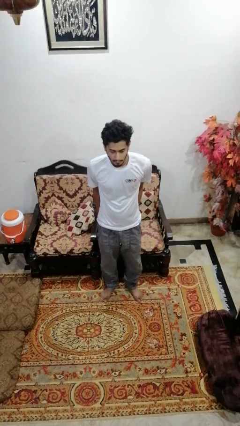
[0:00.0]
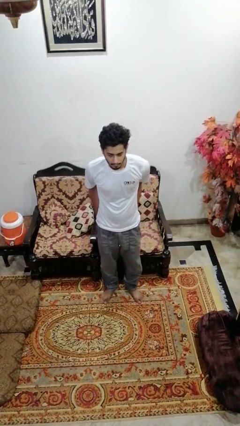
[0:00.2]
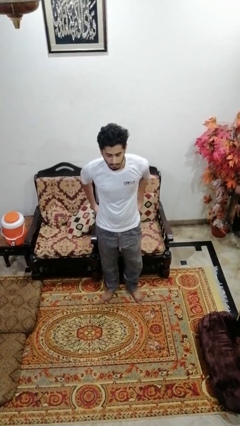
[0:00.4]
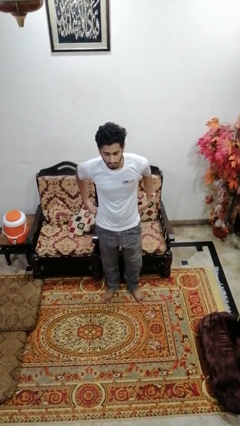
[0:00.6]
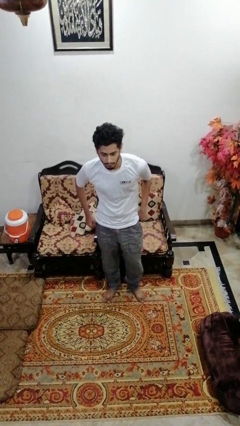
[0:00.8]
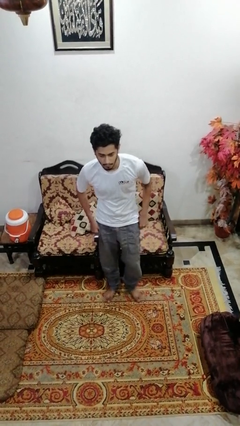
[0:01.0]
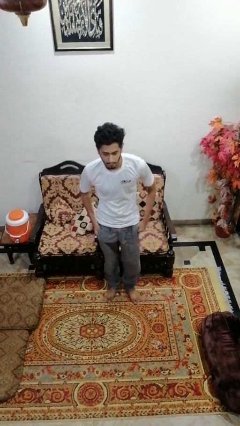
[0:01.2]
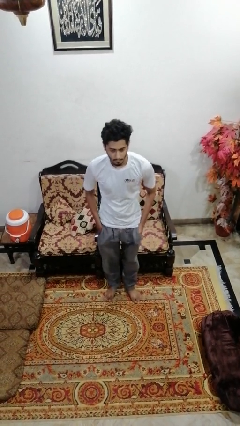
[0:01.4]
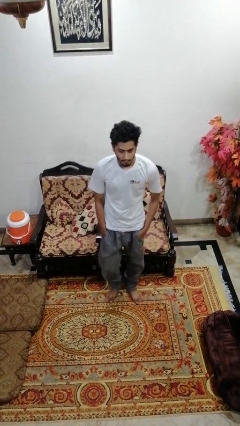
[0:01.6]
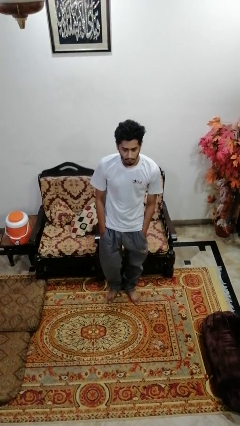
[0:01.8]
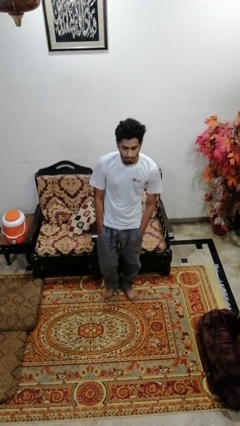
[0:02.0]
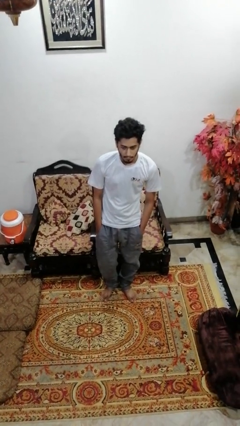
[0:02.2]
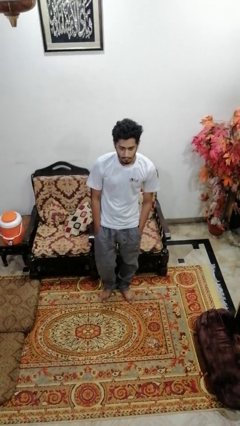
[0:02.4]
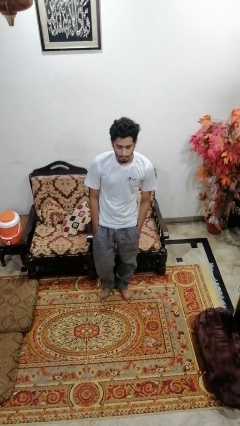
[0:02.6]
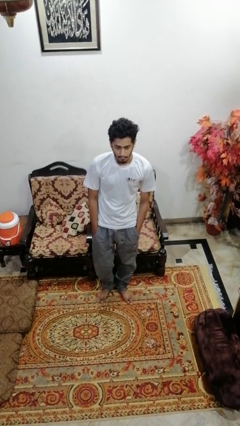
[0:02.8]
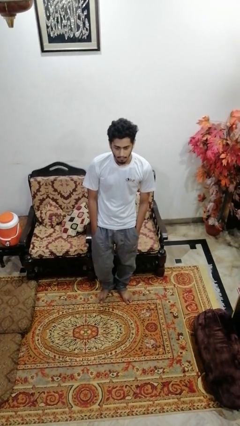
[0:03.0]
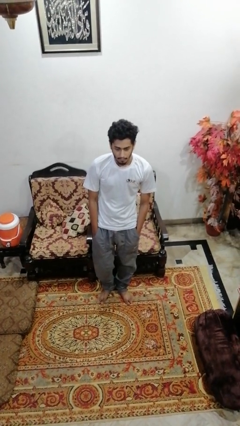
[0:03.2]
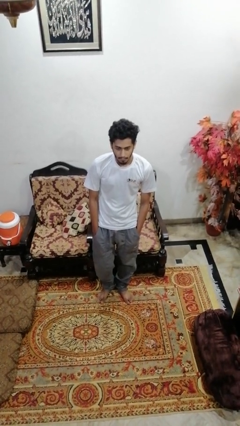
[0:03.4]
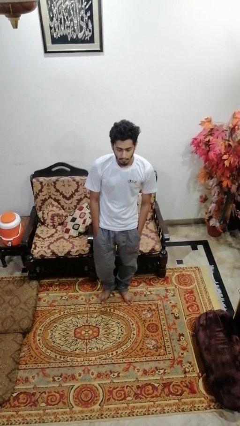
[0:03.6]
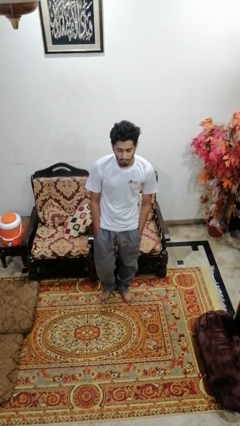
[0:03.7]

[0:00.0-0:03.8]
person puts hands in back pockets

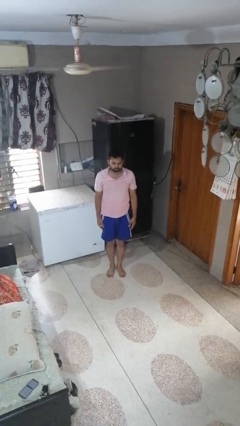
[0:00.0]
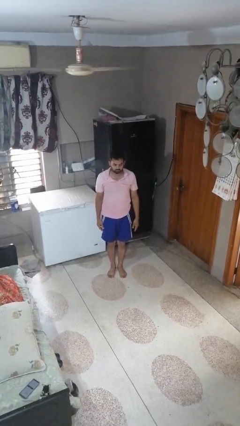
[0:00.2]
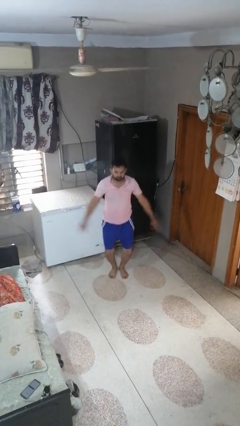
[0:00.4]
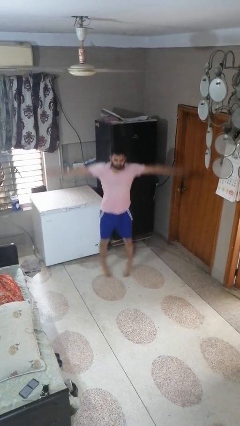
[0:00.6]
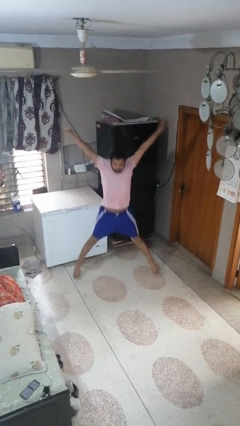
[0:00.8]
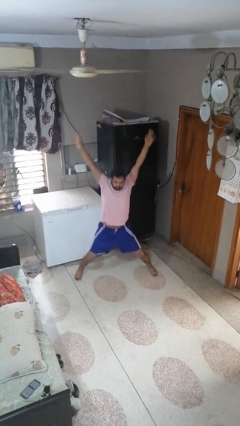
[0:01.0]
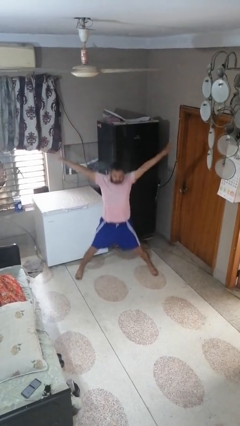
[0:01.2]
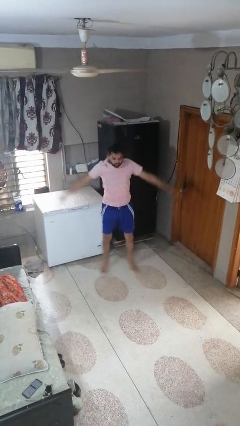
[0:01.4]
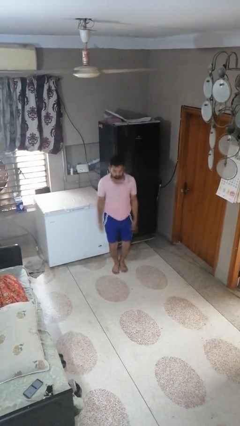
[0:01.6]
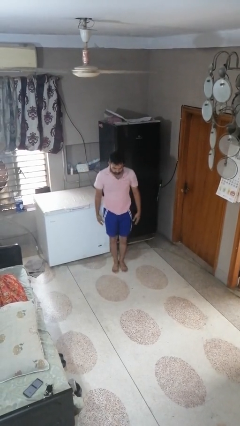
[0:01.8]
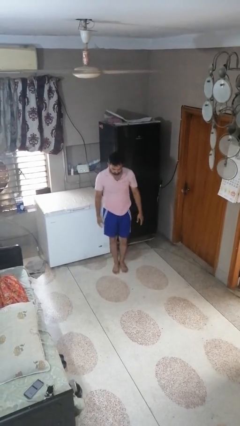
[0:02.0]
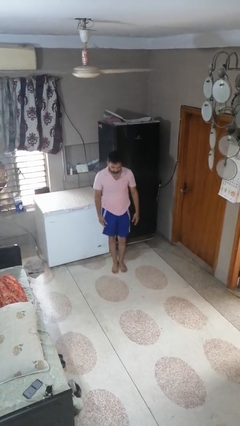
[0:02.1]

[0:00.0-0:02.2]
person exercises with jumping jacks

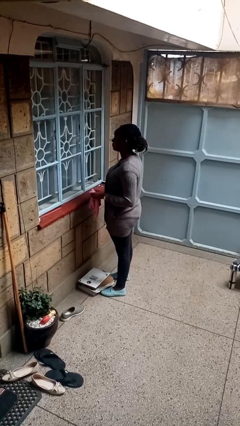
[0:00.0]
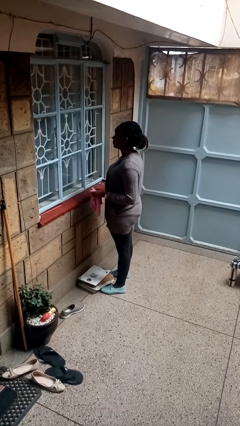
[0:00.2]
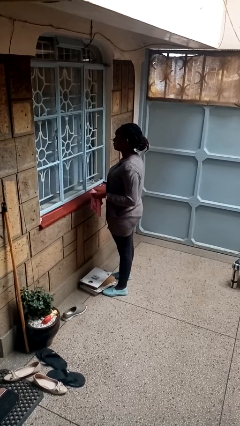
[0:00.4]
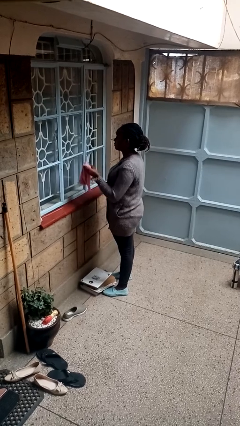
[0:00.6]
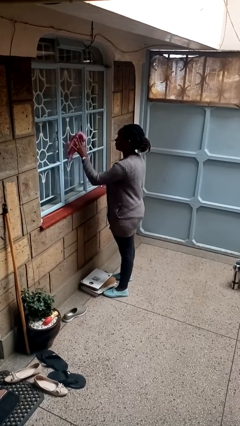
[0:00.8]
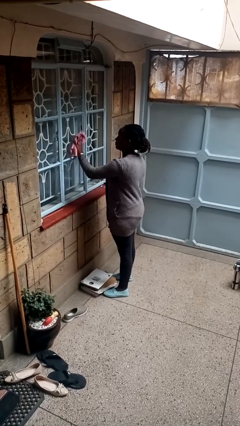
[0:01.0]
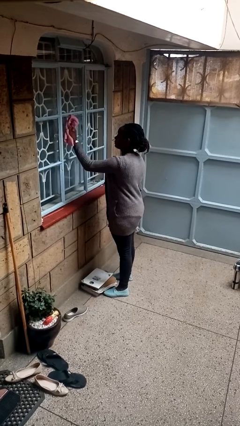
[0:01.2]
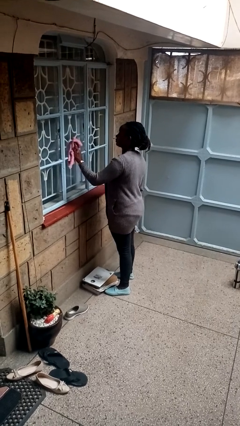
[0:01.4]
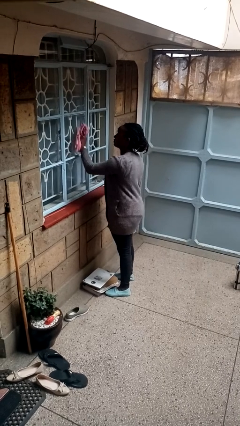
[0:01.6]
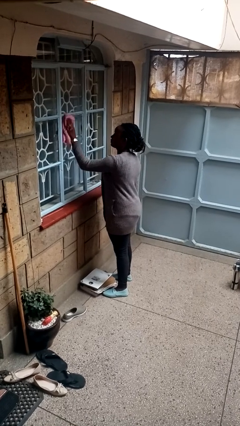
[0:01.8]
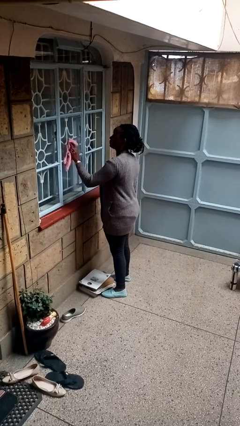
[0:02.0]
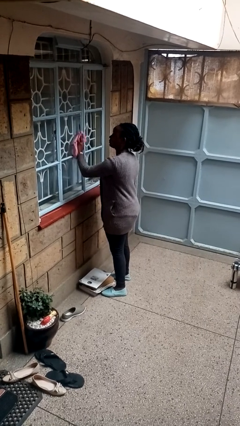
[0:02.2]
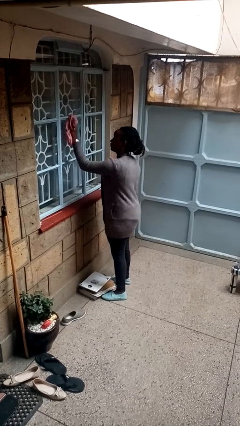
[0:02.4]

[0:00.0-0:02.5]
person washes window

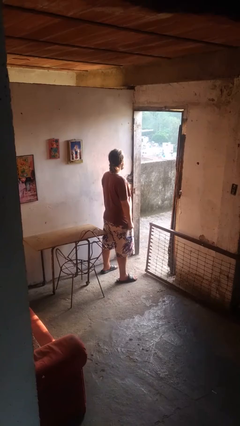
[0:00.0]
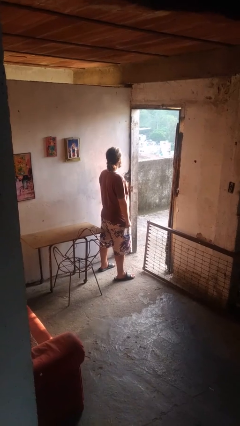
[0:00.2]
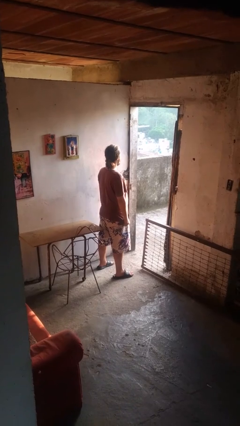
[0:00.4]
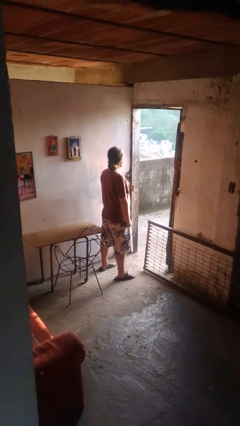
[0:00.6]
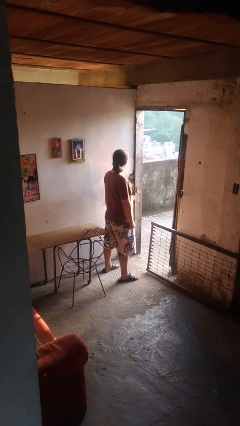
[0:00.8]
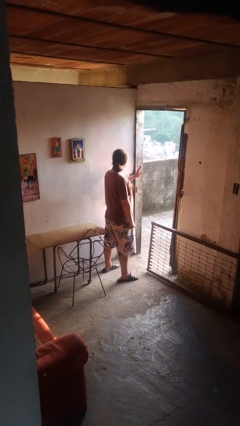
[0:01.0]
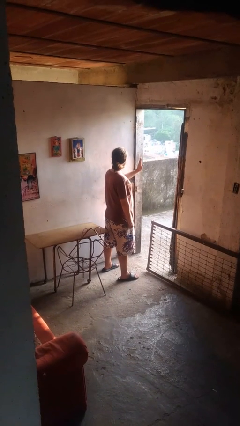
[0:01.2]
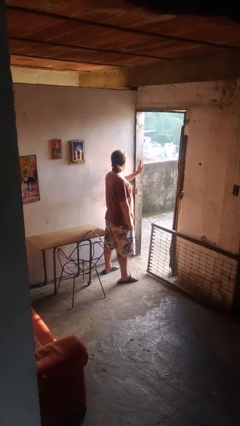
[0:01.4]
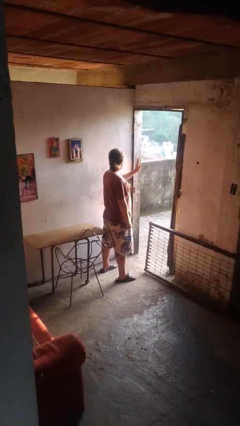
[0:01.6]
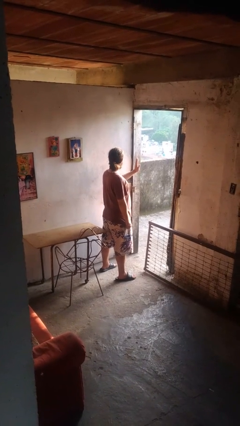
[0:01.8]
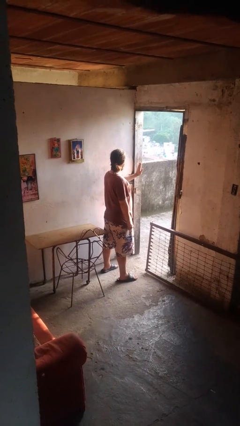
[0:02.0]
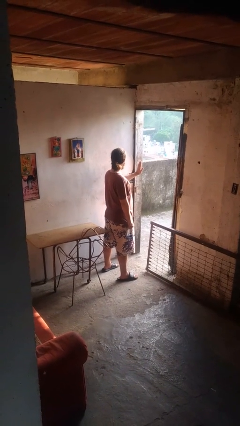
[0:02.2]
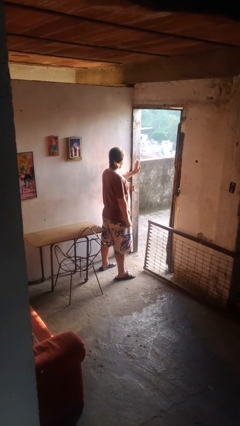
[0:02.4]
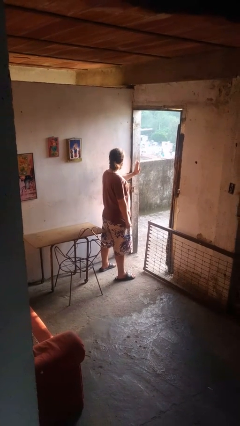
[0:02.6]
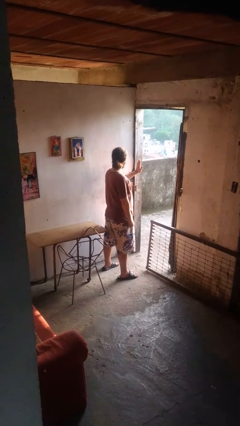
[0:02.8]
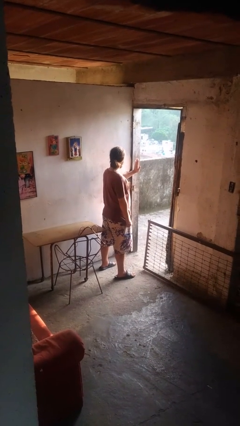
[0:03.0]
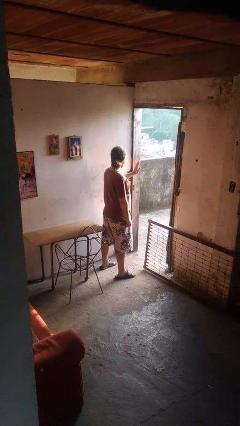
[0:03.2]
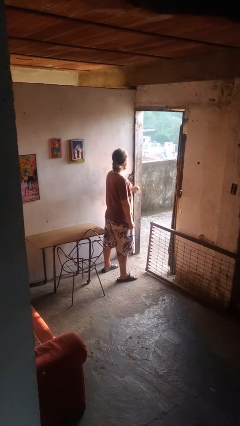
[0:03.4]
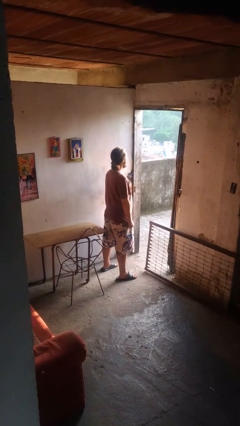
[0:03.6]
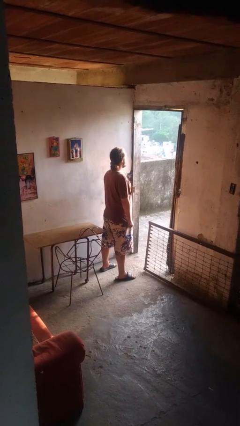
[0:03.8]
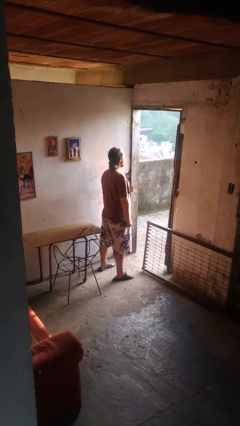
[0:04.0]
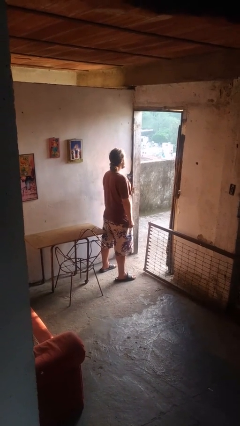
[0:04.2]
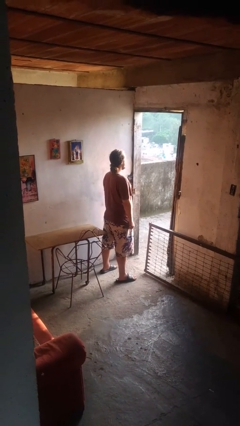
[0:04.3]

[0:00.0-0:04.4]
person gestures stop

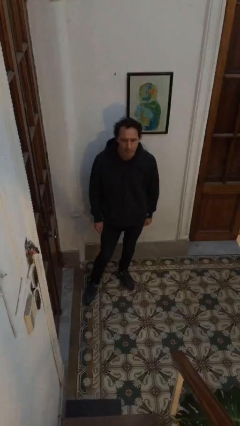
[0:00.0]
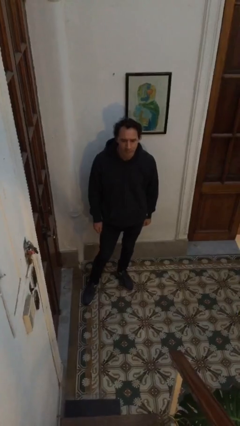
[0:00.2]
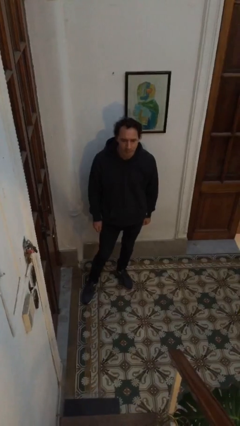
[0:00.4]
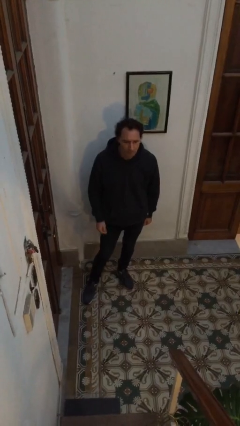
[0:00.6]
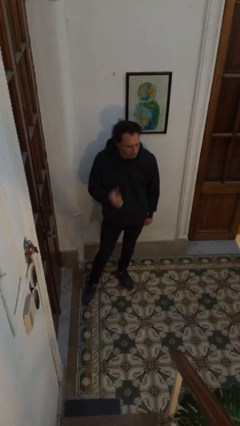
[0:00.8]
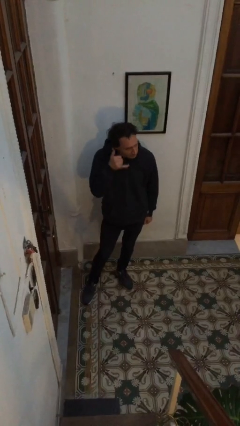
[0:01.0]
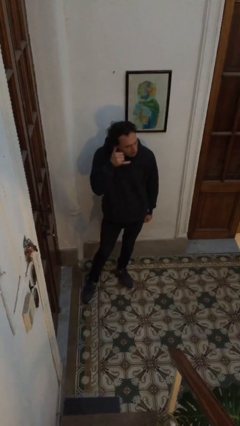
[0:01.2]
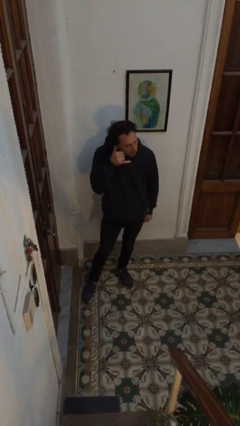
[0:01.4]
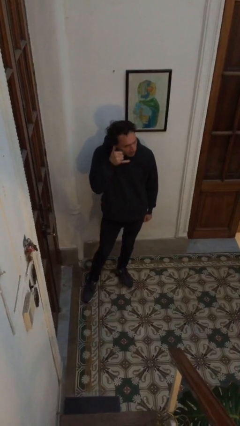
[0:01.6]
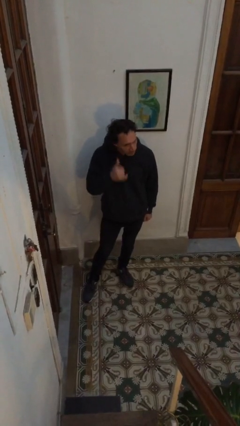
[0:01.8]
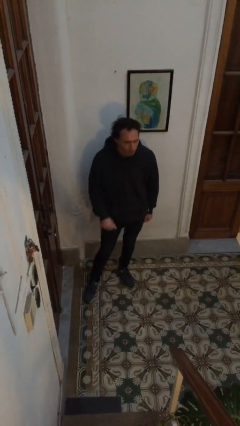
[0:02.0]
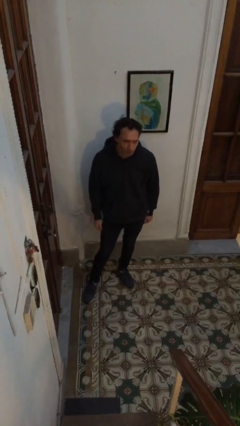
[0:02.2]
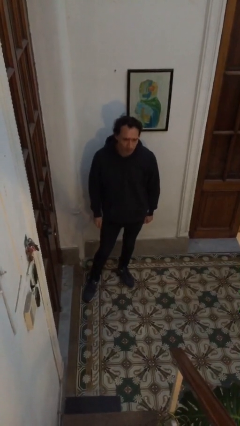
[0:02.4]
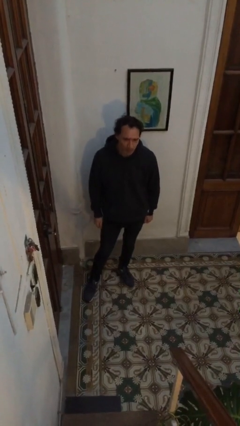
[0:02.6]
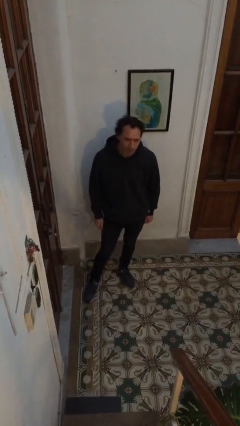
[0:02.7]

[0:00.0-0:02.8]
person gestures call me

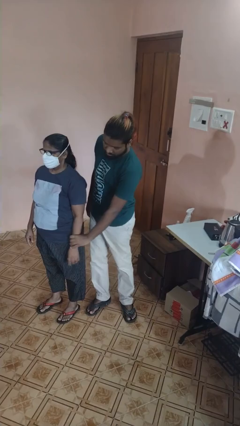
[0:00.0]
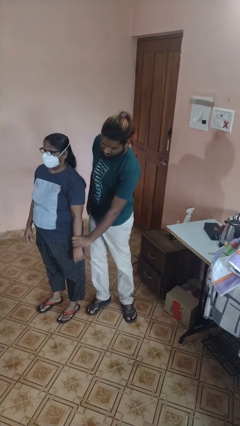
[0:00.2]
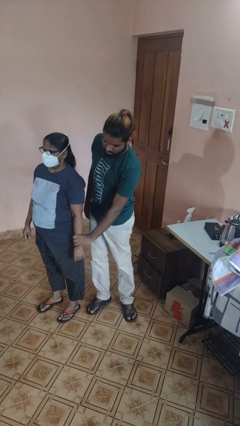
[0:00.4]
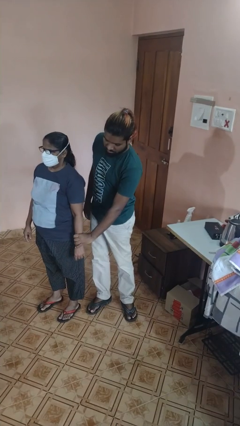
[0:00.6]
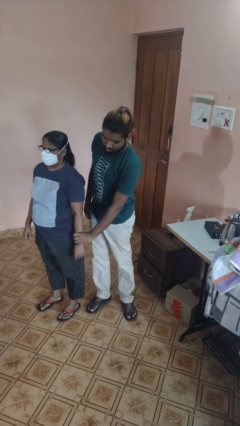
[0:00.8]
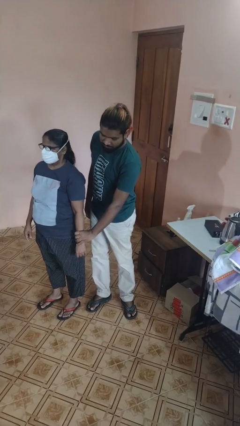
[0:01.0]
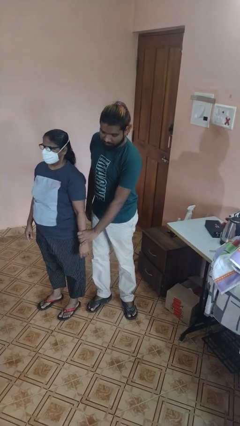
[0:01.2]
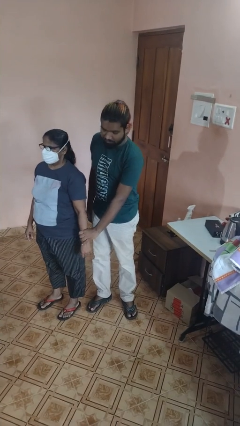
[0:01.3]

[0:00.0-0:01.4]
person grabs person by forearm

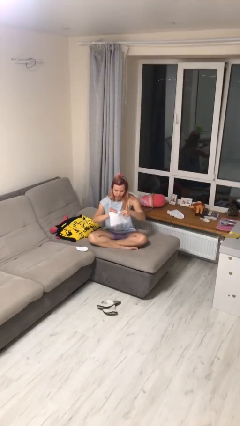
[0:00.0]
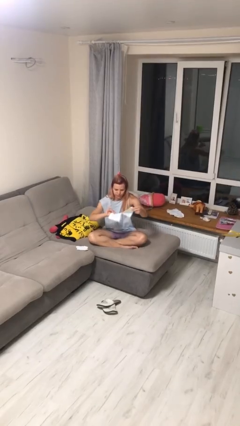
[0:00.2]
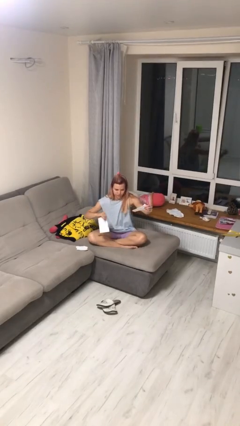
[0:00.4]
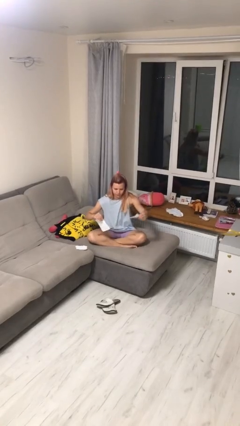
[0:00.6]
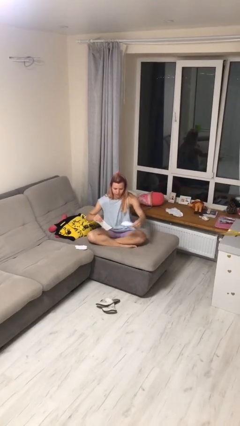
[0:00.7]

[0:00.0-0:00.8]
person tears paper
